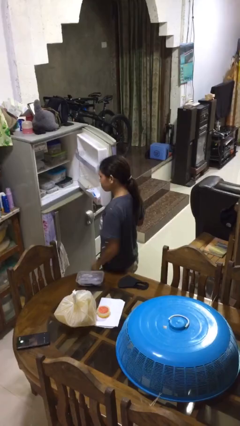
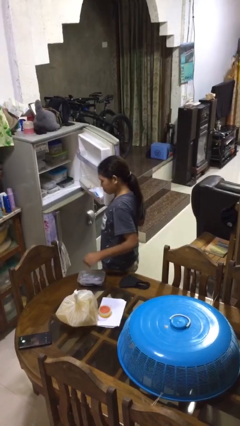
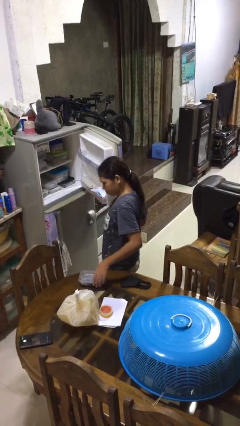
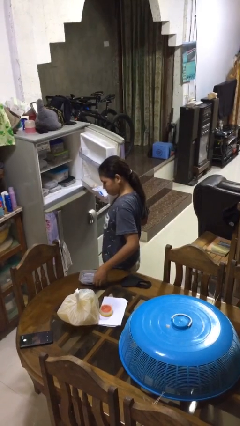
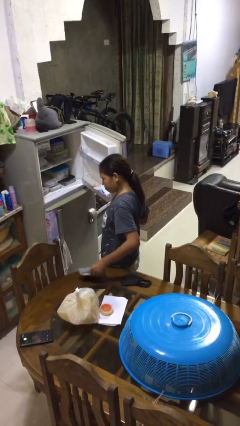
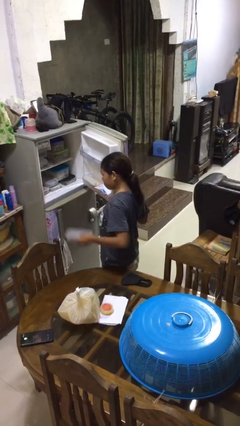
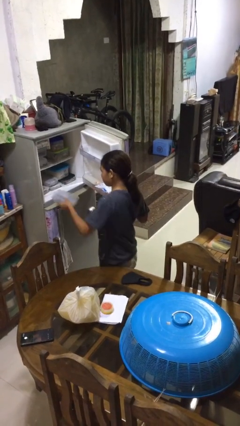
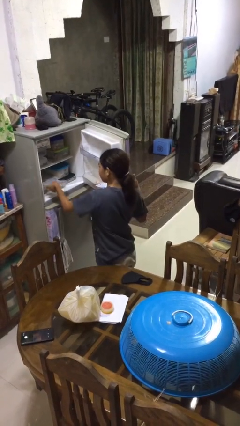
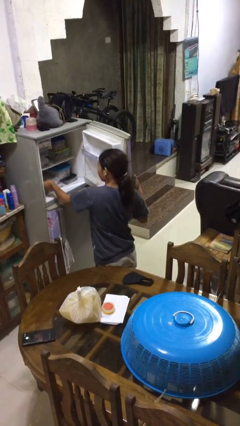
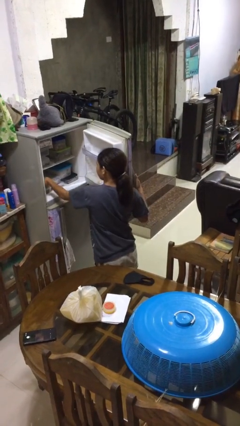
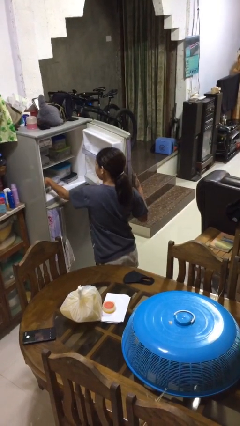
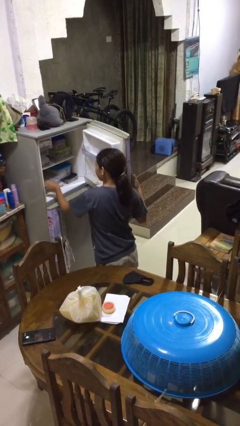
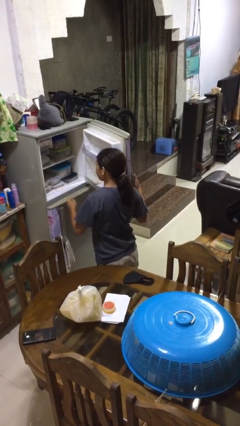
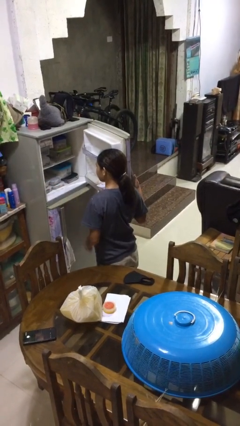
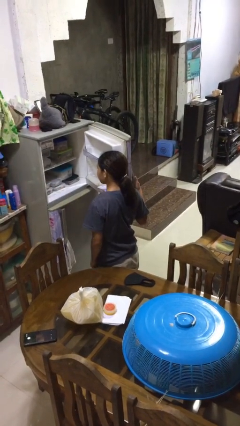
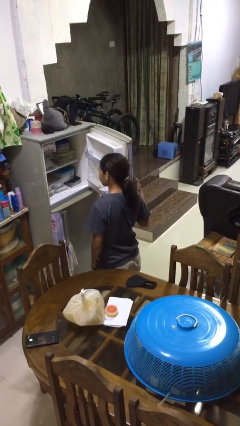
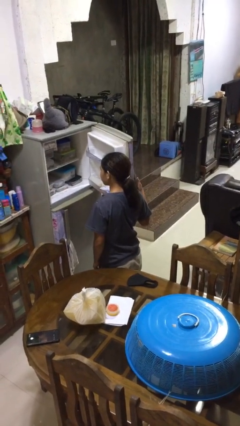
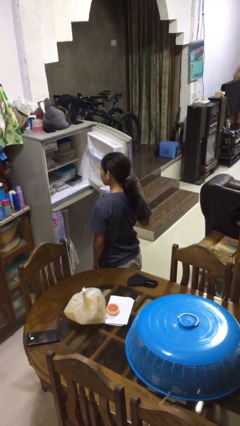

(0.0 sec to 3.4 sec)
person puts object into refrigerator

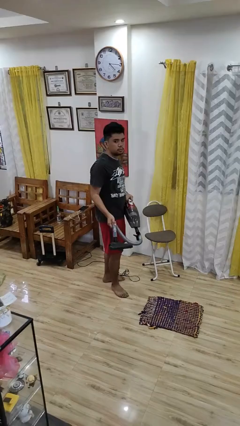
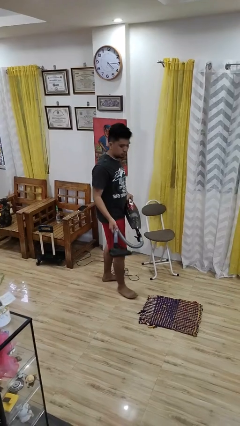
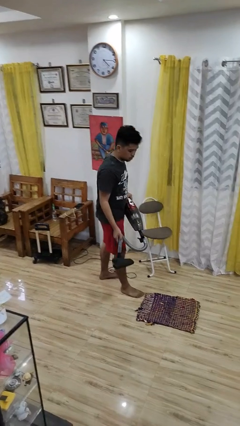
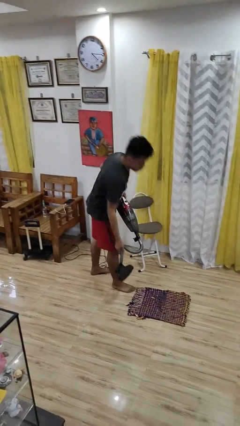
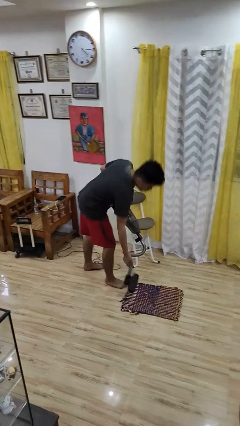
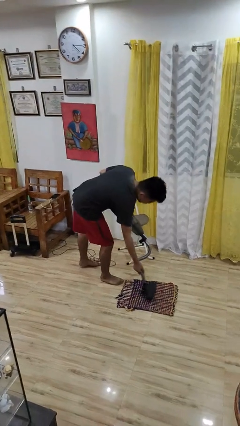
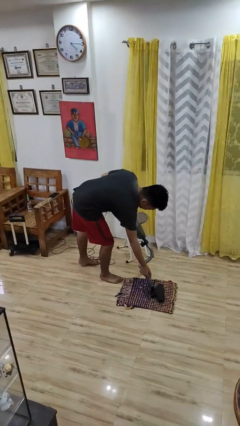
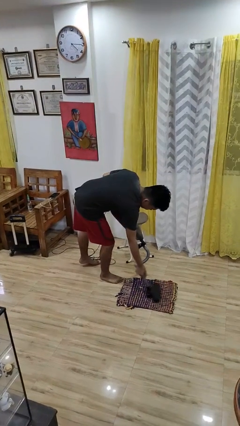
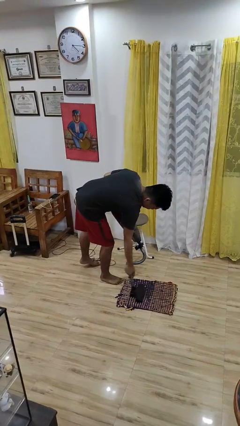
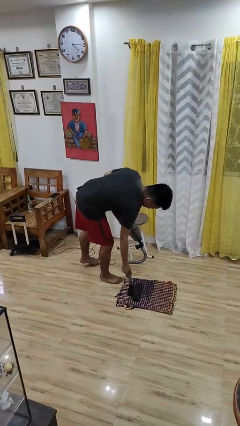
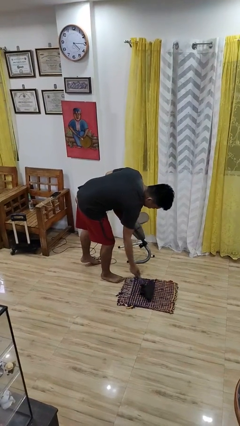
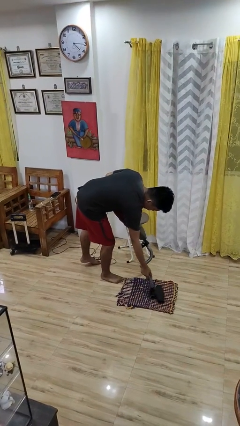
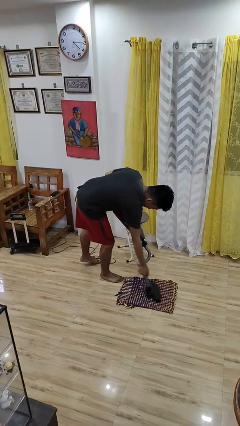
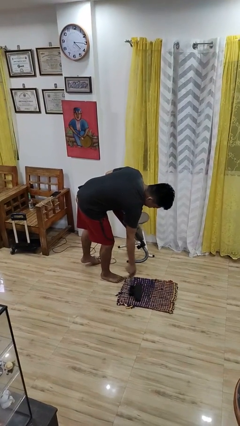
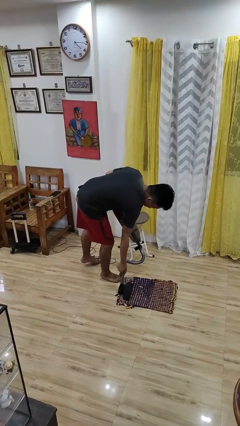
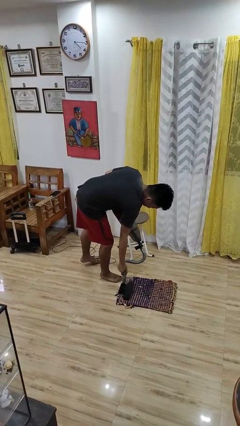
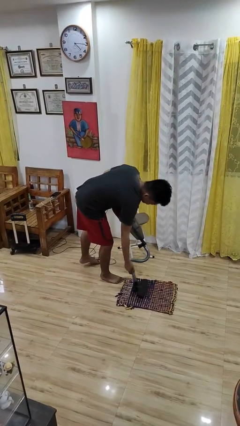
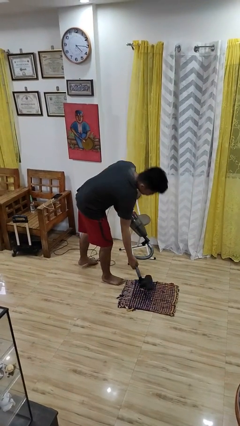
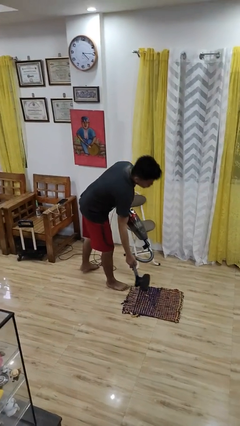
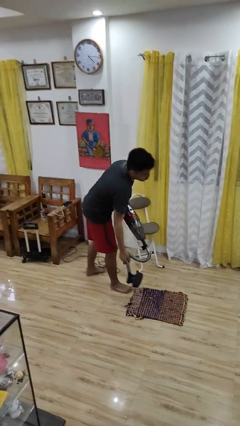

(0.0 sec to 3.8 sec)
person vacuums carpet

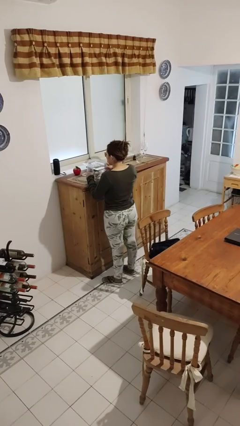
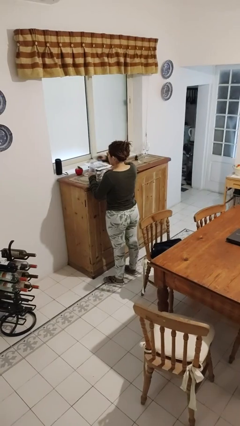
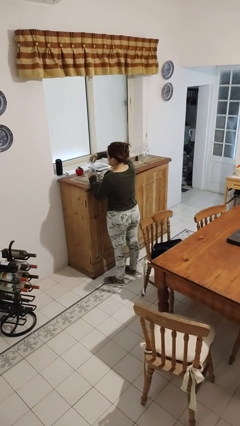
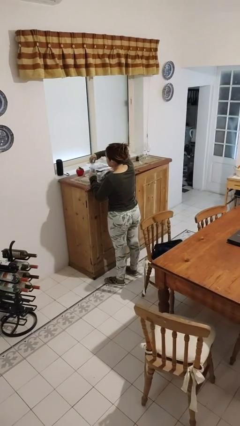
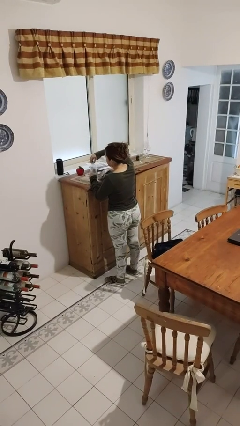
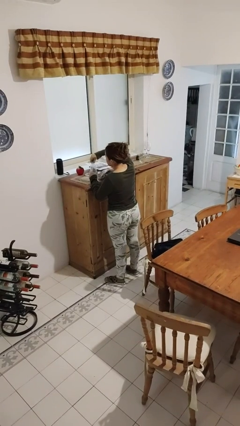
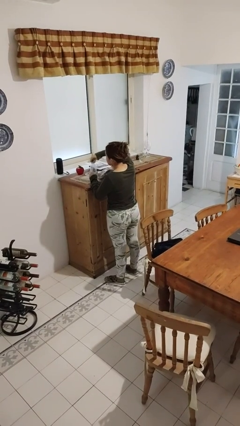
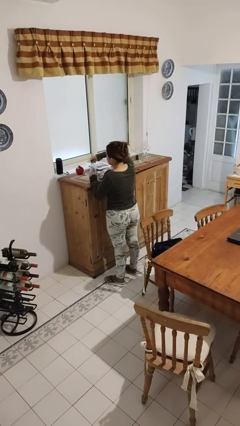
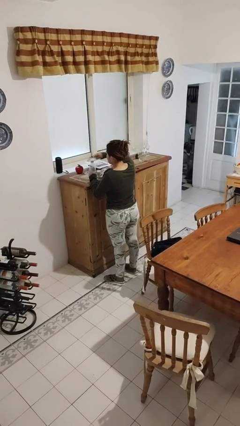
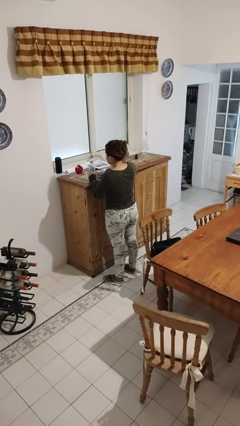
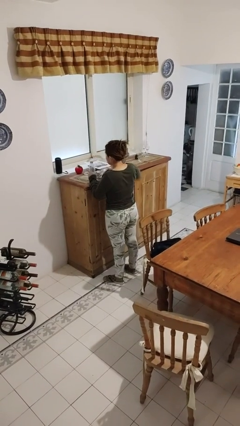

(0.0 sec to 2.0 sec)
person screws lid to bottle

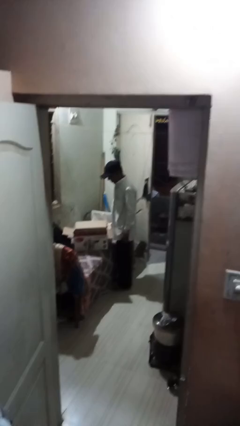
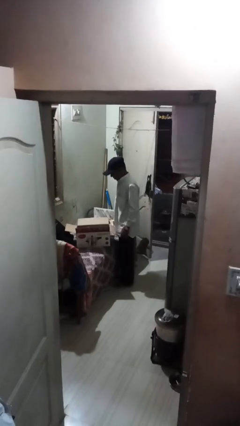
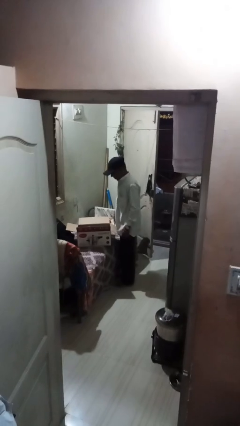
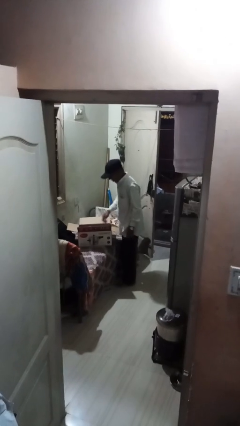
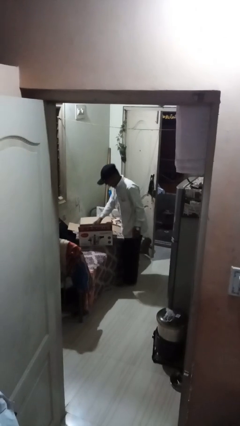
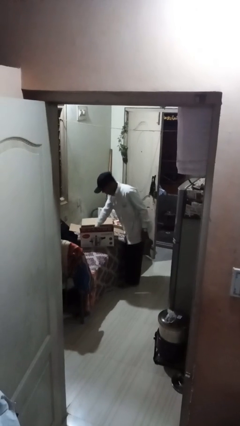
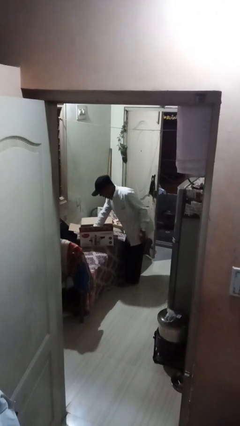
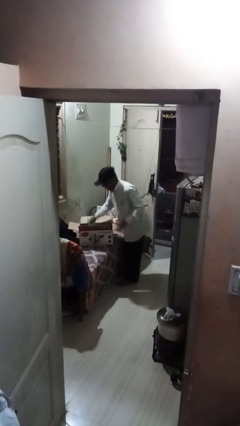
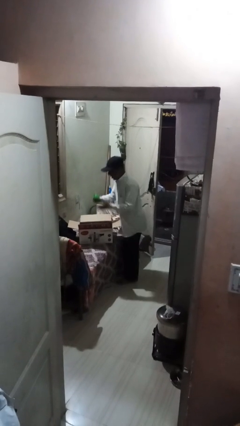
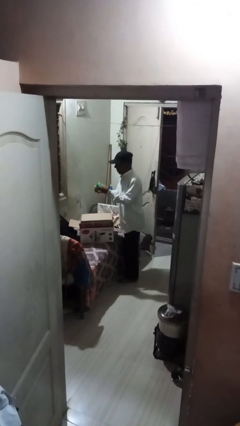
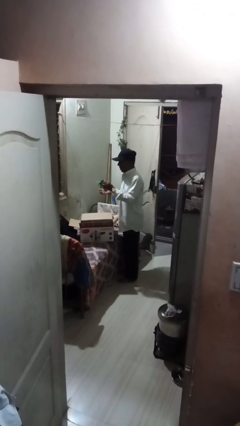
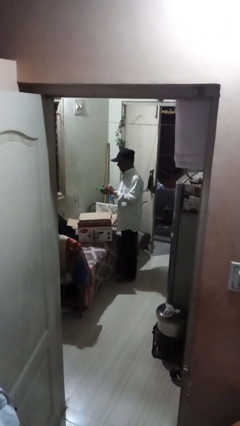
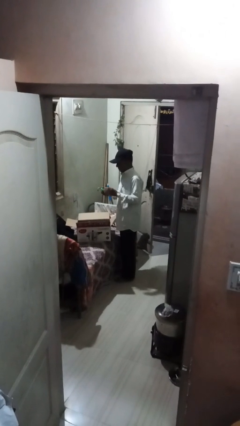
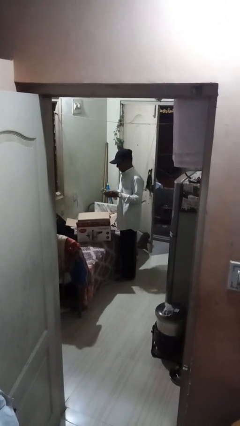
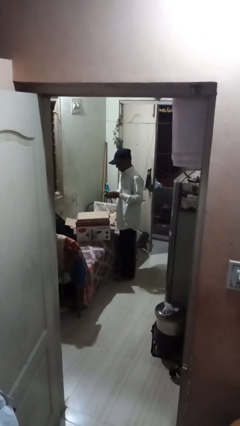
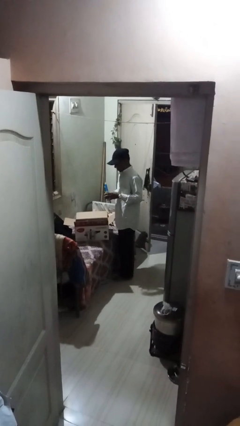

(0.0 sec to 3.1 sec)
person takes object from box

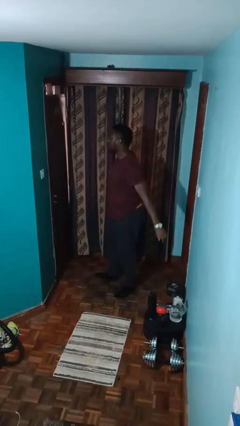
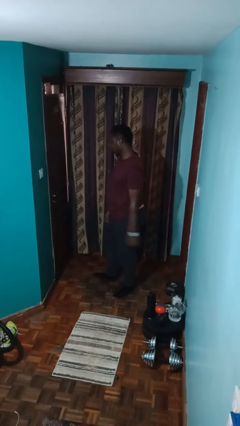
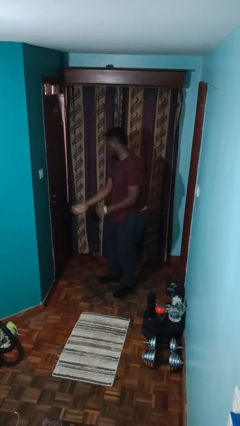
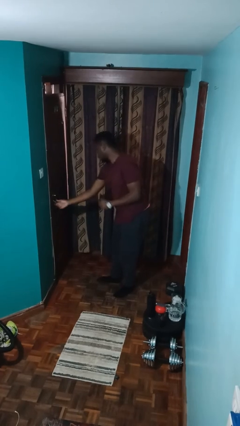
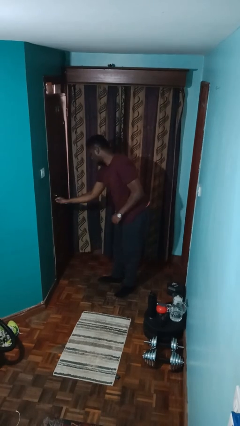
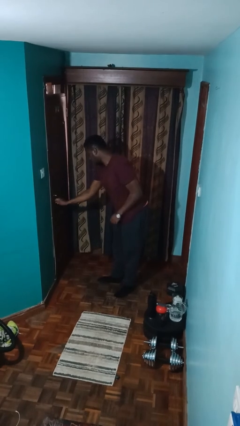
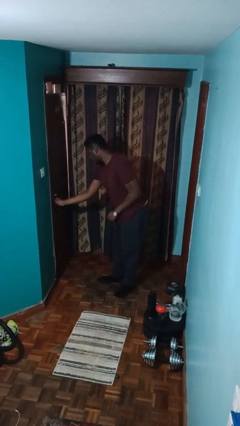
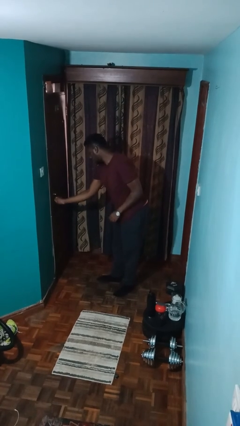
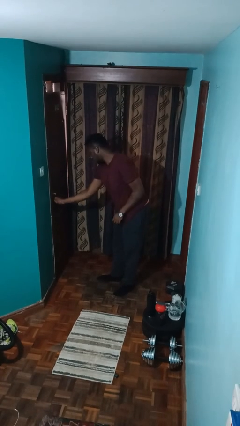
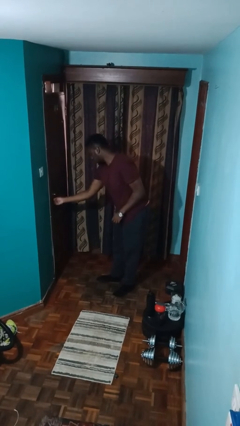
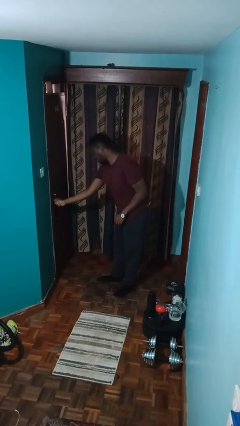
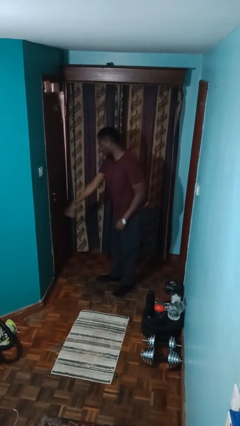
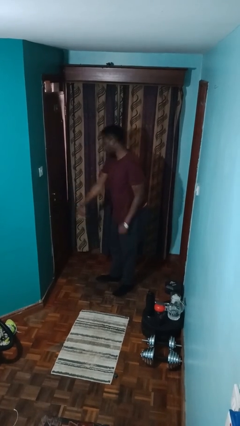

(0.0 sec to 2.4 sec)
person locks door with keys

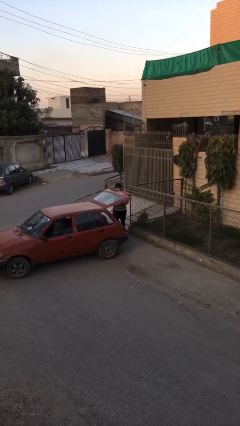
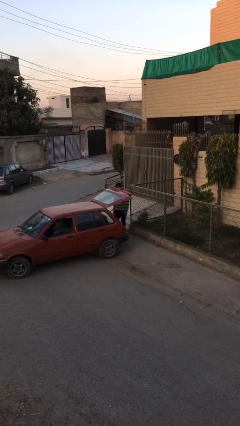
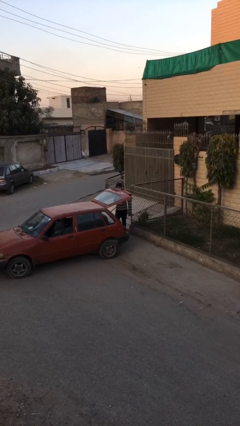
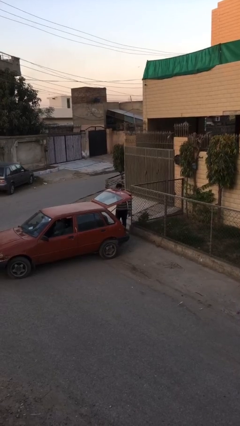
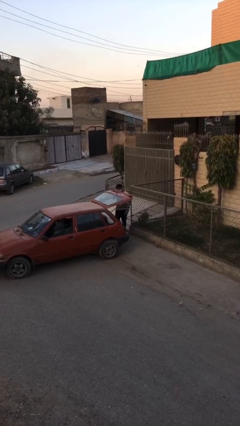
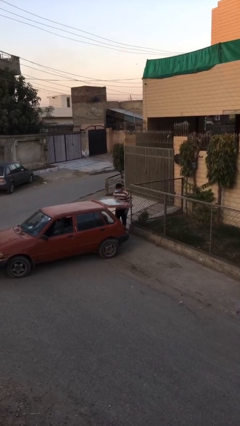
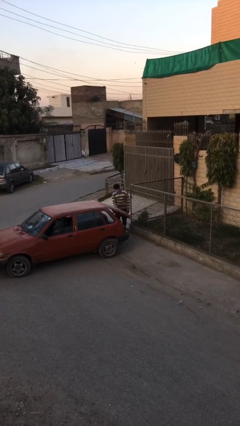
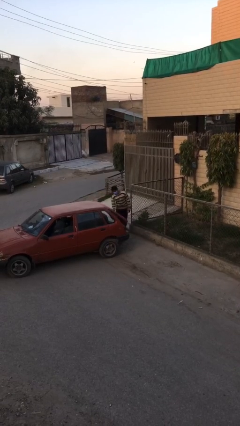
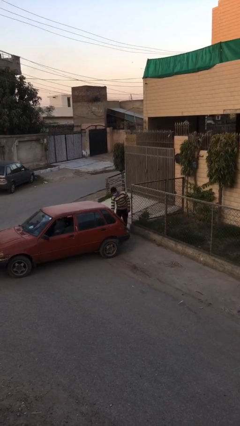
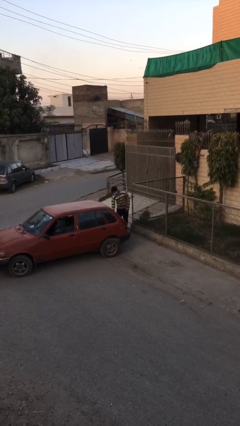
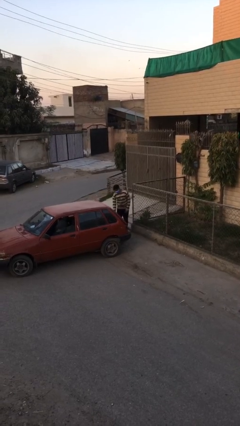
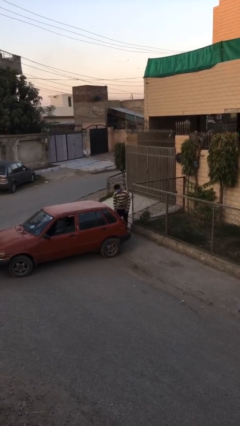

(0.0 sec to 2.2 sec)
person closes car trunk

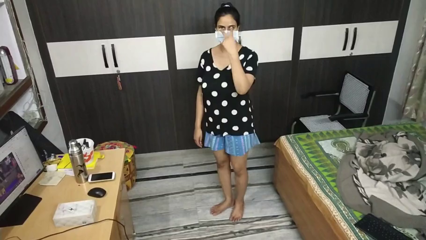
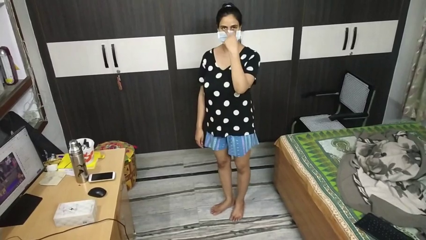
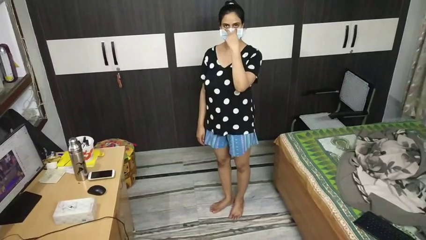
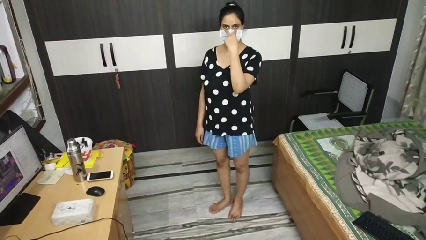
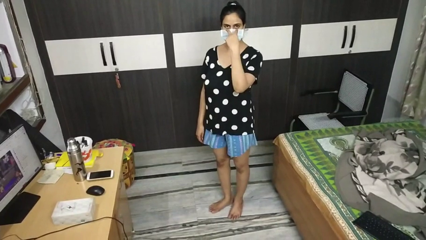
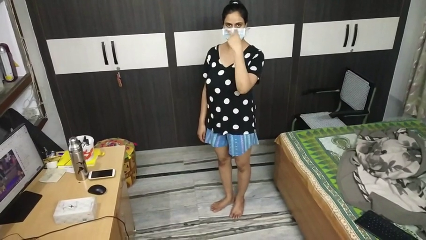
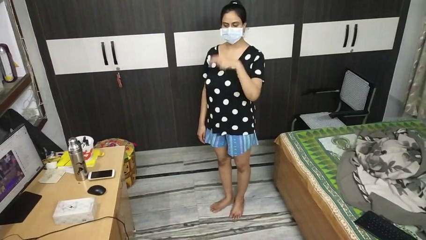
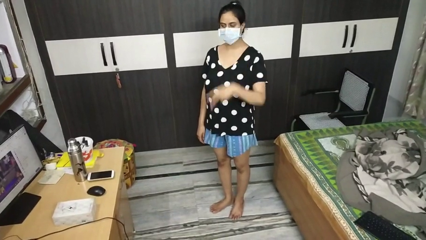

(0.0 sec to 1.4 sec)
person gestures watch closely
